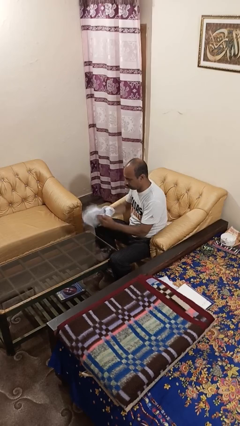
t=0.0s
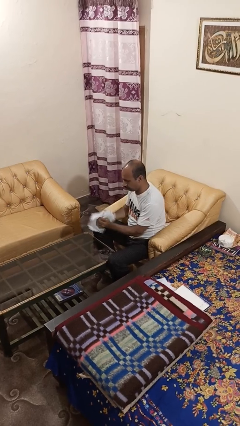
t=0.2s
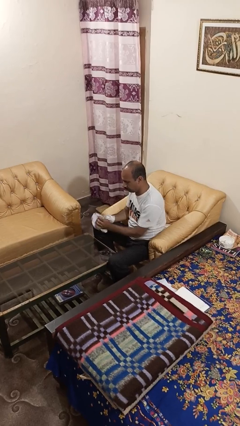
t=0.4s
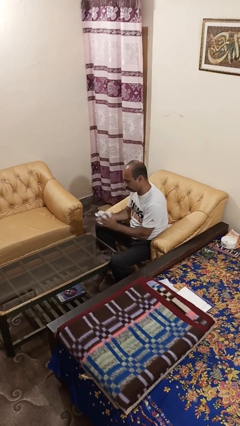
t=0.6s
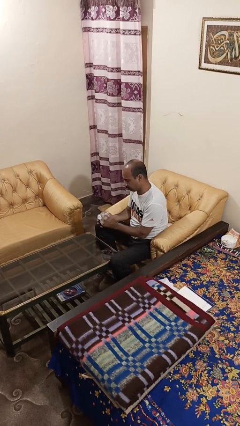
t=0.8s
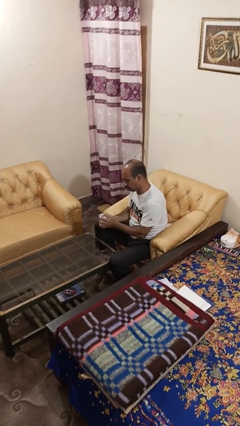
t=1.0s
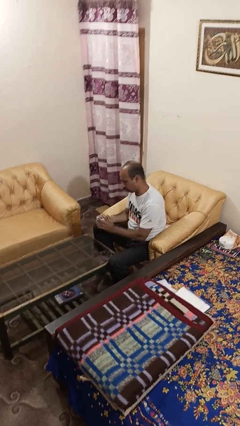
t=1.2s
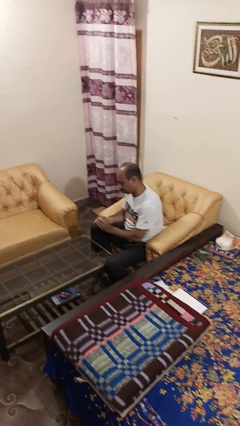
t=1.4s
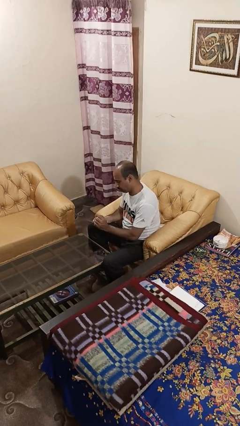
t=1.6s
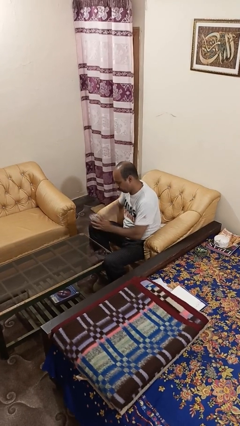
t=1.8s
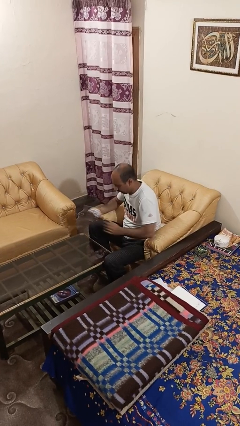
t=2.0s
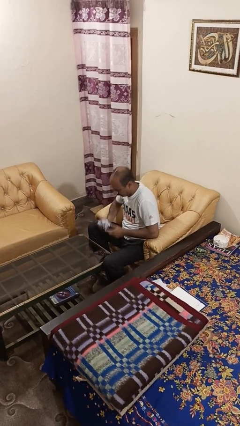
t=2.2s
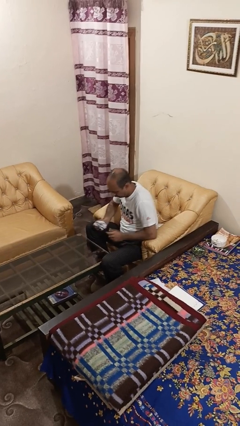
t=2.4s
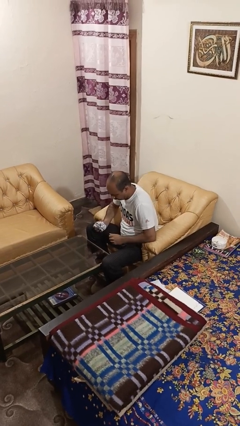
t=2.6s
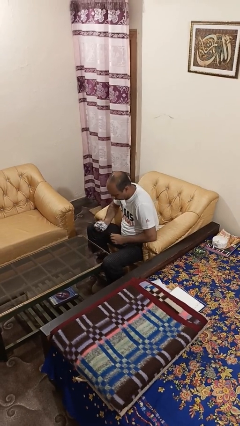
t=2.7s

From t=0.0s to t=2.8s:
person crumples paper

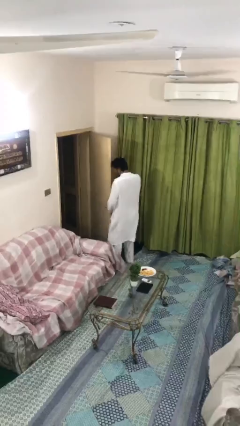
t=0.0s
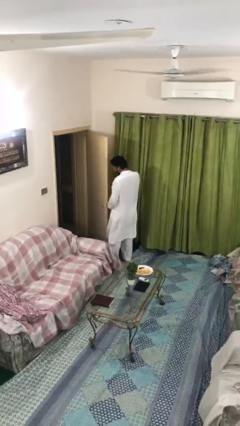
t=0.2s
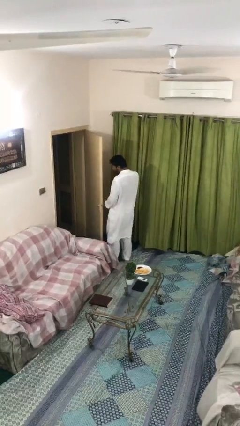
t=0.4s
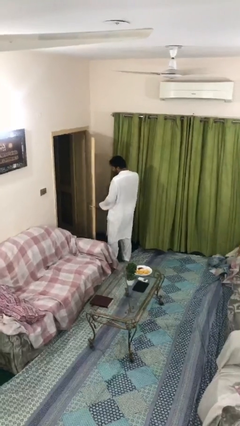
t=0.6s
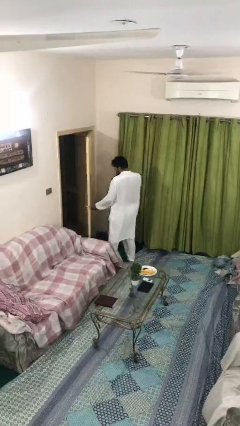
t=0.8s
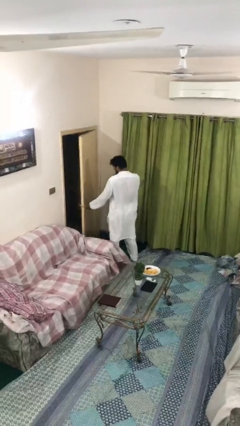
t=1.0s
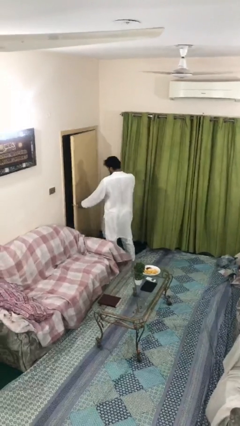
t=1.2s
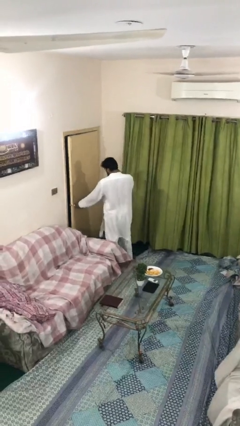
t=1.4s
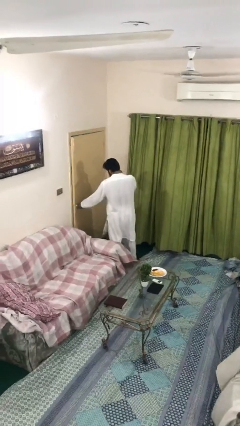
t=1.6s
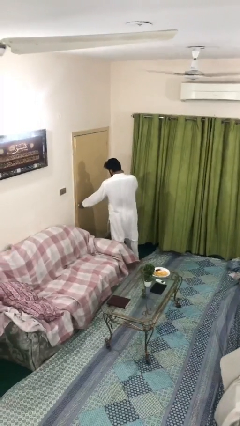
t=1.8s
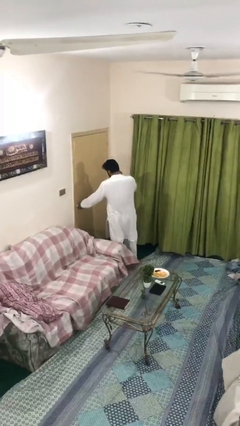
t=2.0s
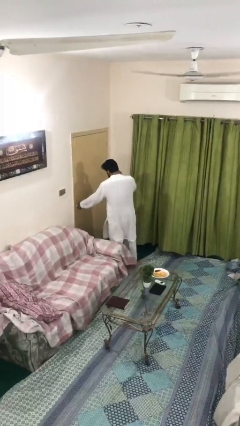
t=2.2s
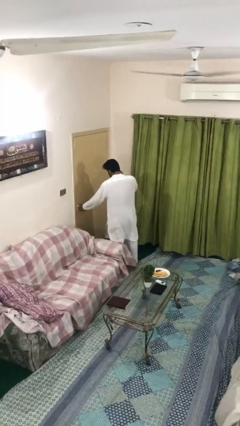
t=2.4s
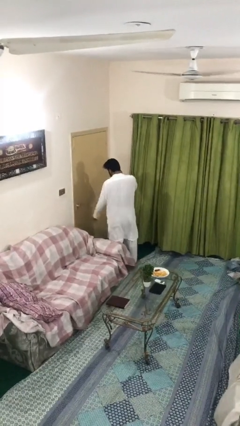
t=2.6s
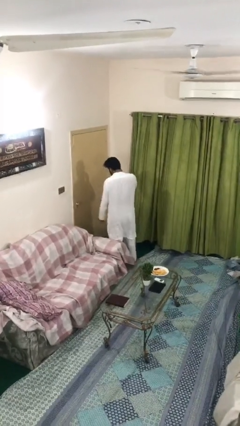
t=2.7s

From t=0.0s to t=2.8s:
person closes facility door

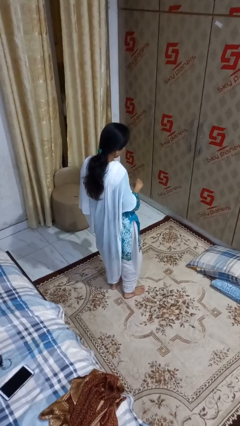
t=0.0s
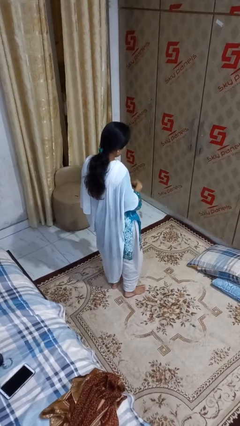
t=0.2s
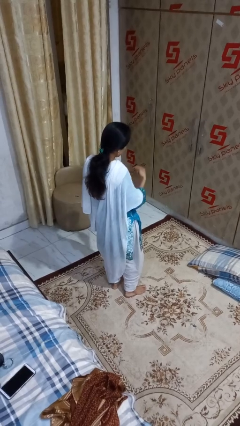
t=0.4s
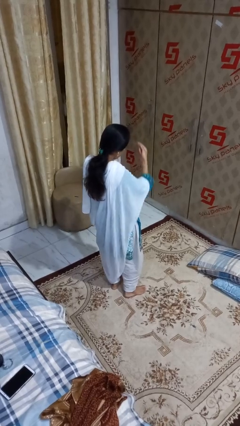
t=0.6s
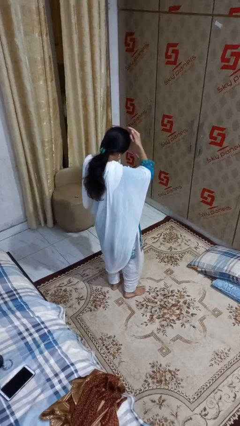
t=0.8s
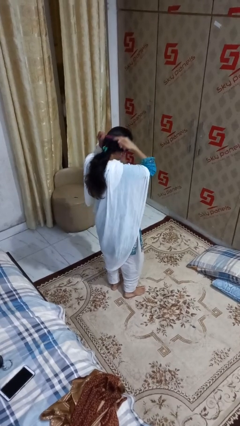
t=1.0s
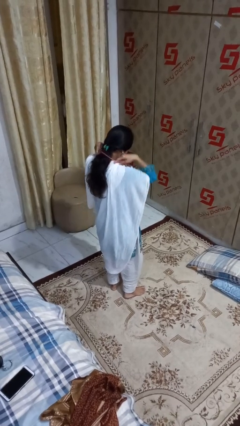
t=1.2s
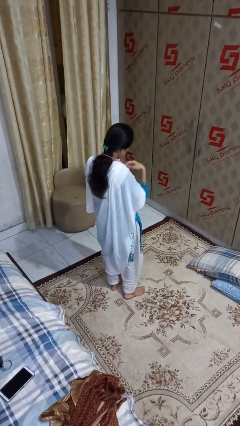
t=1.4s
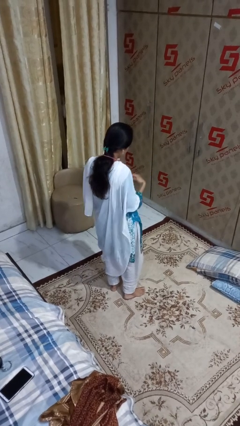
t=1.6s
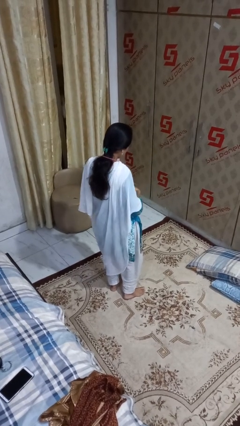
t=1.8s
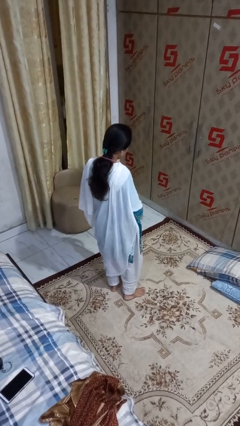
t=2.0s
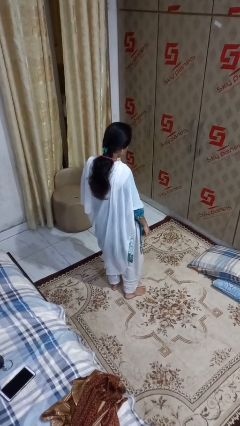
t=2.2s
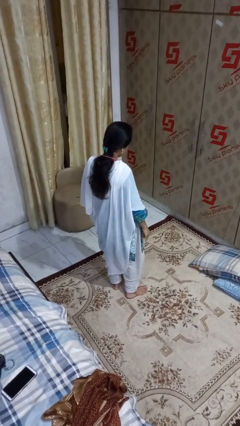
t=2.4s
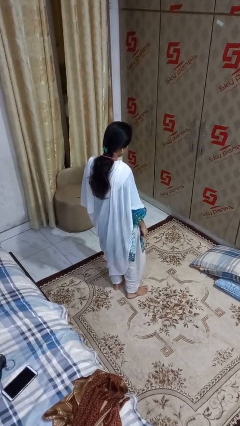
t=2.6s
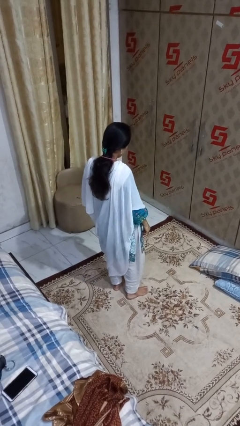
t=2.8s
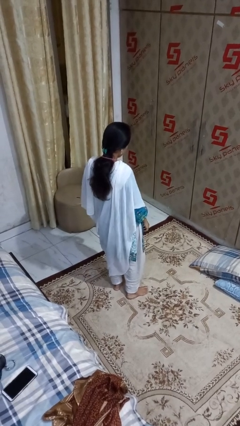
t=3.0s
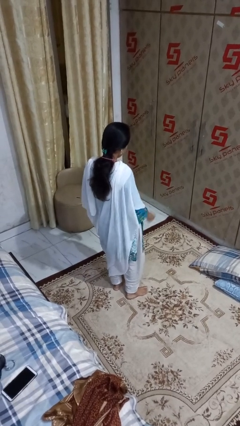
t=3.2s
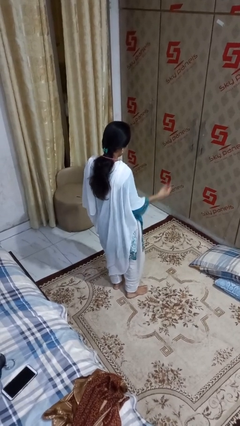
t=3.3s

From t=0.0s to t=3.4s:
person puts on necklace

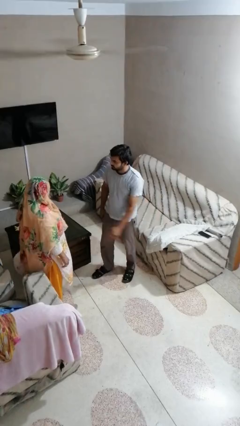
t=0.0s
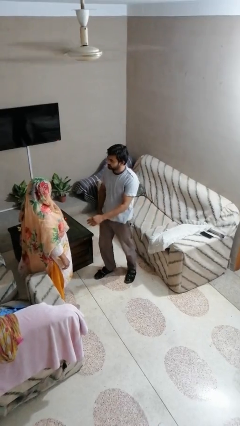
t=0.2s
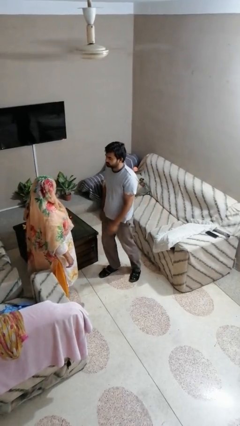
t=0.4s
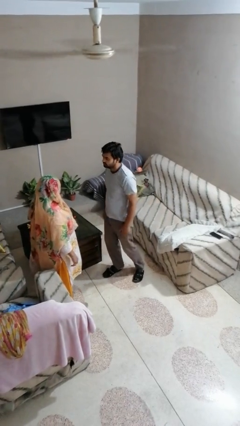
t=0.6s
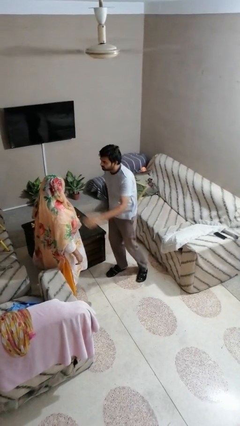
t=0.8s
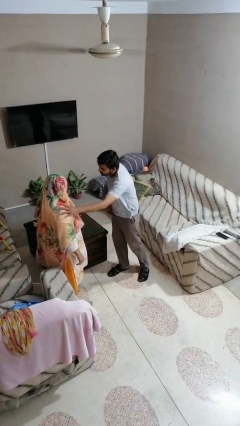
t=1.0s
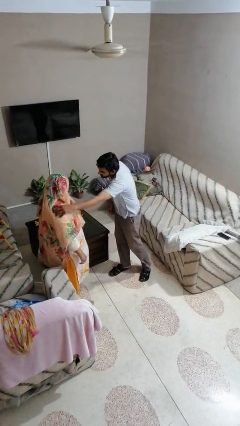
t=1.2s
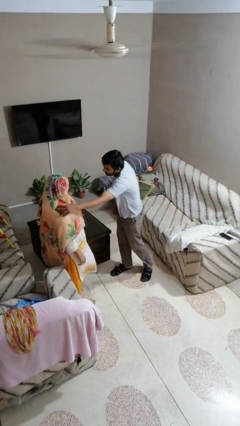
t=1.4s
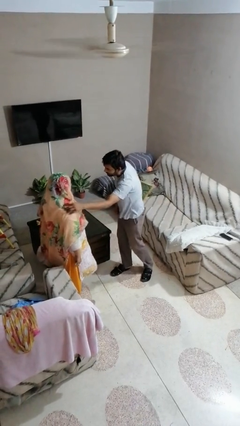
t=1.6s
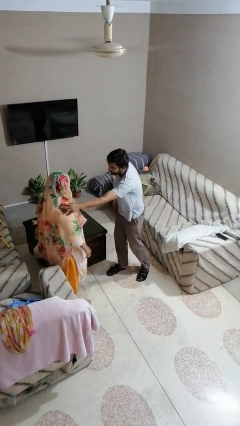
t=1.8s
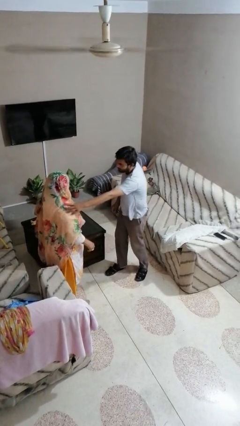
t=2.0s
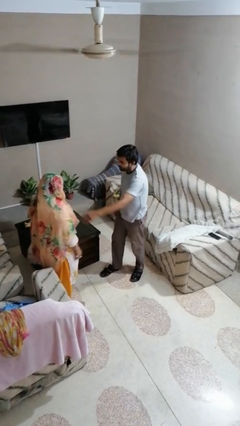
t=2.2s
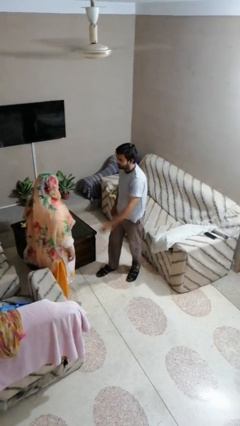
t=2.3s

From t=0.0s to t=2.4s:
person shoves person

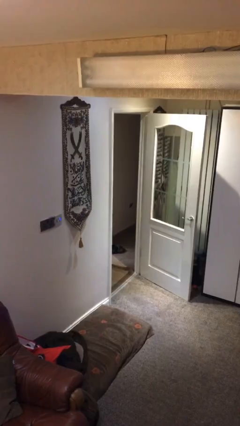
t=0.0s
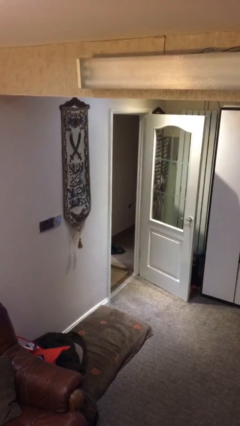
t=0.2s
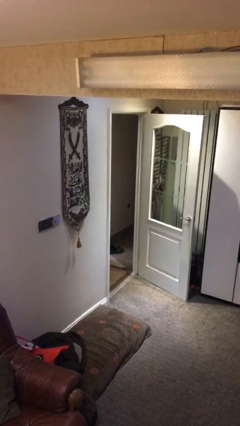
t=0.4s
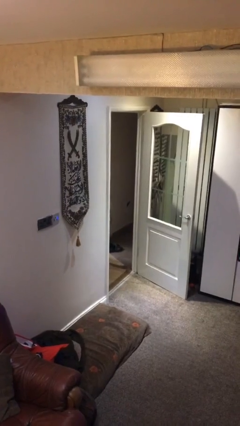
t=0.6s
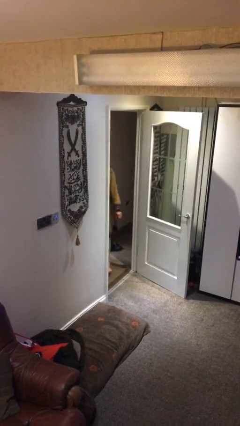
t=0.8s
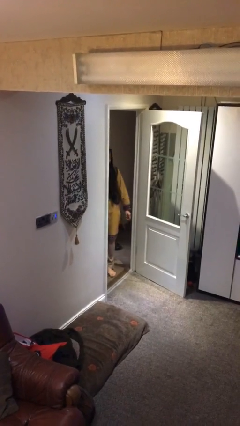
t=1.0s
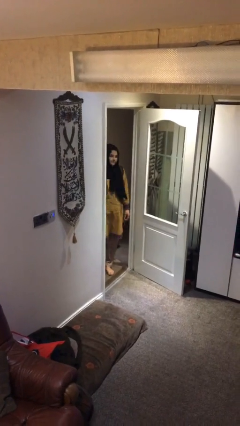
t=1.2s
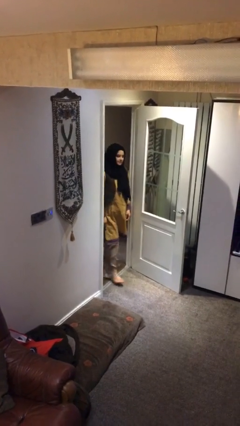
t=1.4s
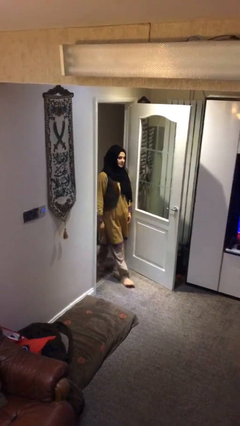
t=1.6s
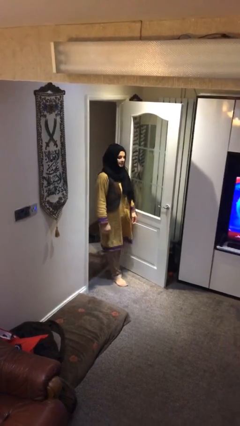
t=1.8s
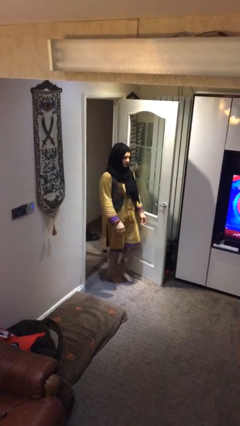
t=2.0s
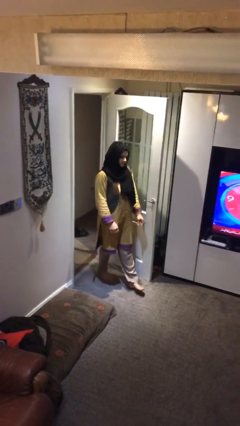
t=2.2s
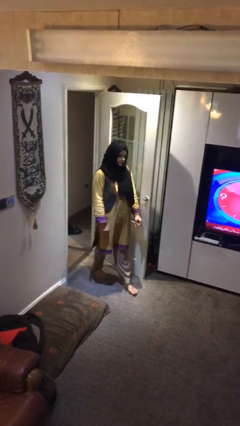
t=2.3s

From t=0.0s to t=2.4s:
person enters scene through structure

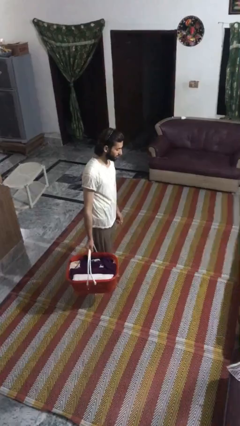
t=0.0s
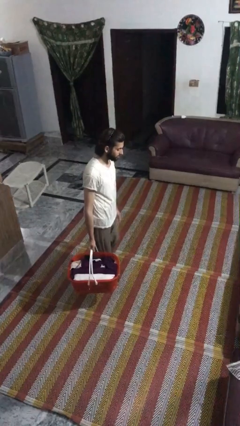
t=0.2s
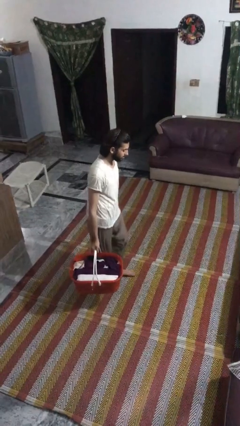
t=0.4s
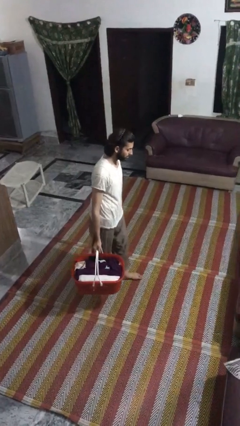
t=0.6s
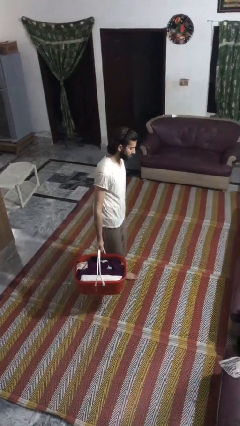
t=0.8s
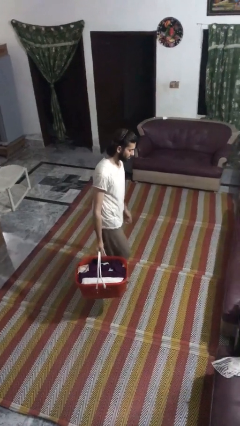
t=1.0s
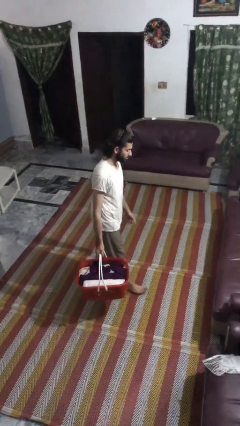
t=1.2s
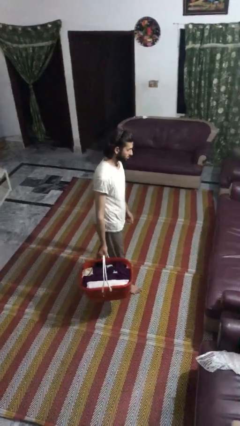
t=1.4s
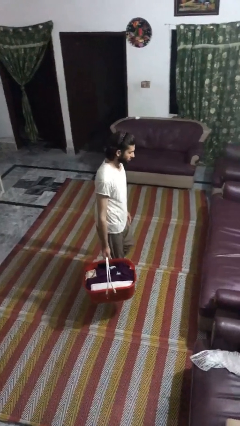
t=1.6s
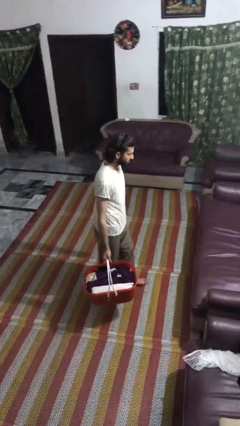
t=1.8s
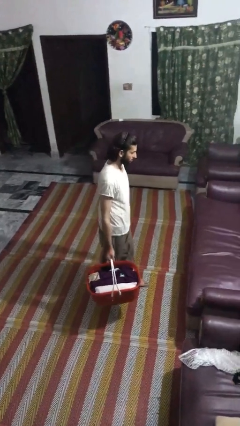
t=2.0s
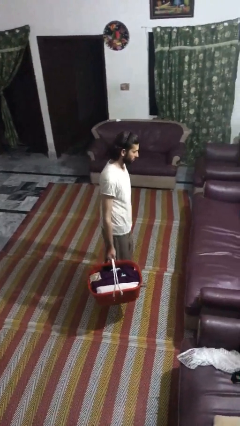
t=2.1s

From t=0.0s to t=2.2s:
person carries laundry basket

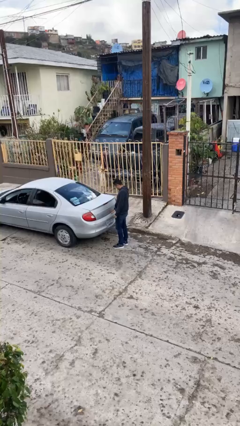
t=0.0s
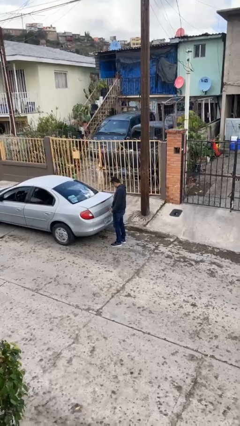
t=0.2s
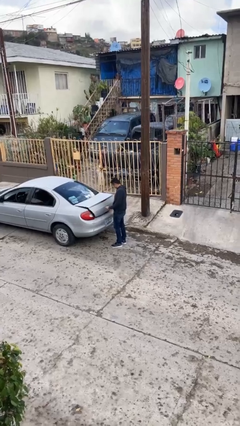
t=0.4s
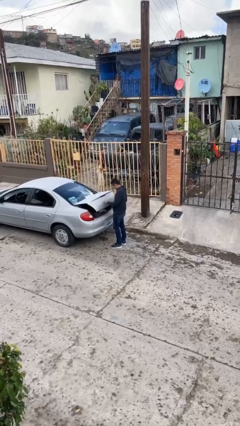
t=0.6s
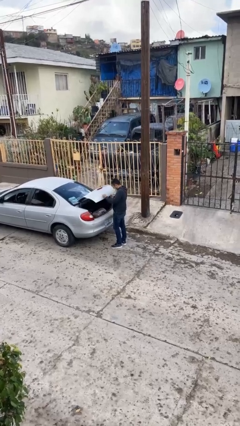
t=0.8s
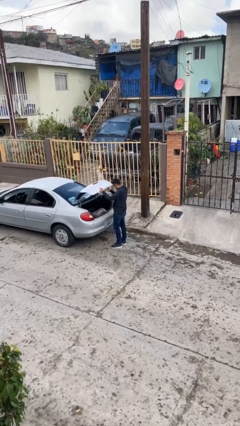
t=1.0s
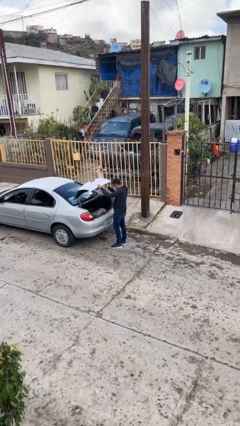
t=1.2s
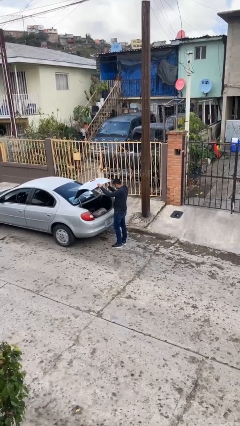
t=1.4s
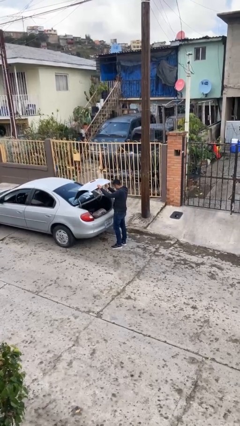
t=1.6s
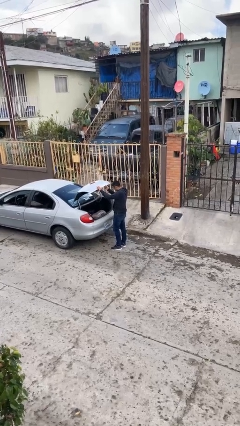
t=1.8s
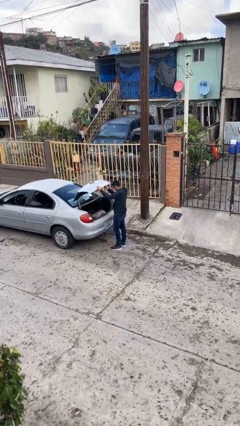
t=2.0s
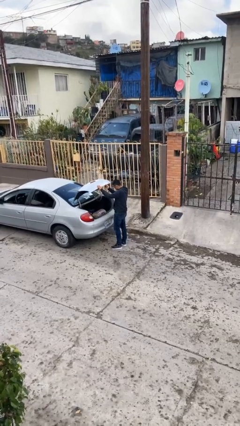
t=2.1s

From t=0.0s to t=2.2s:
person opens car trunk
